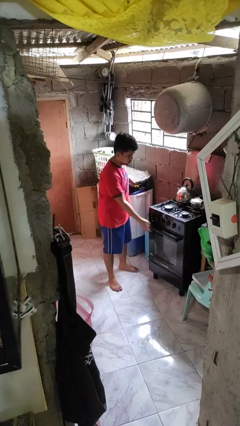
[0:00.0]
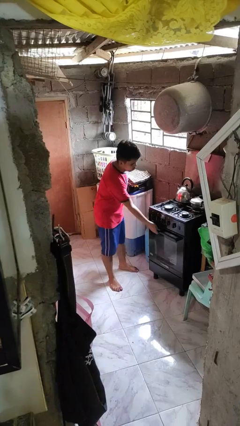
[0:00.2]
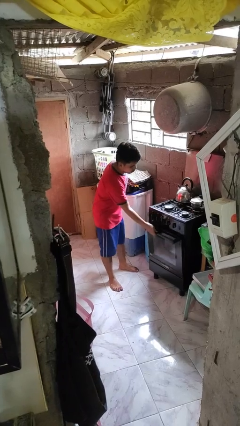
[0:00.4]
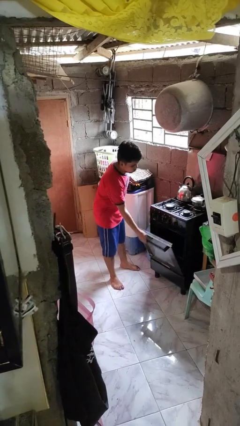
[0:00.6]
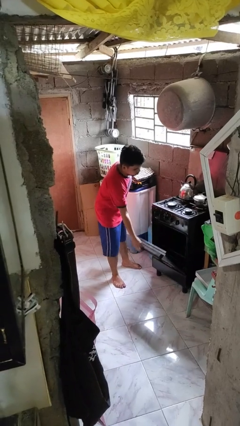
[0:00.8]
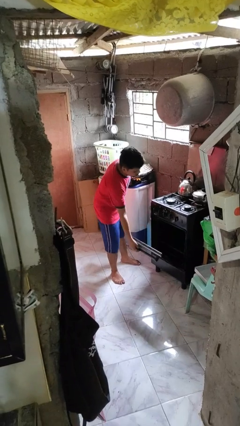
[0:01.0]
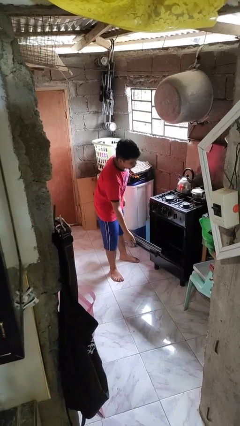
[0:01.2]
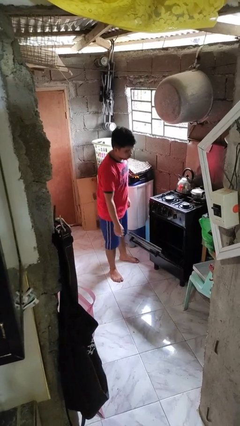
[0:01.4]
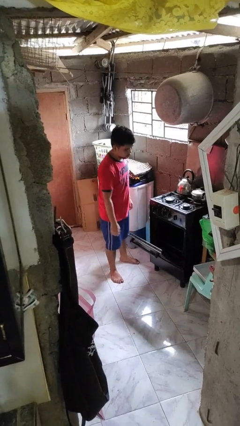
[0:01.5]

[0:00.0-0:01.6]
person opens oven door

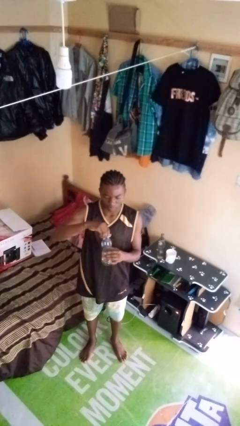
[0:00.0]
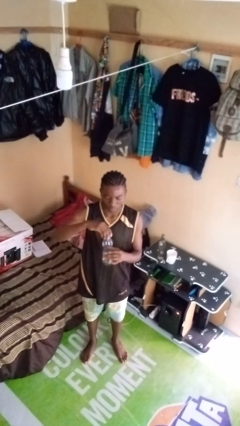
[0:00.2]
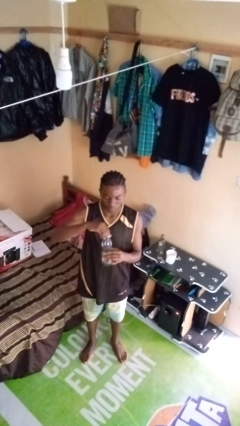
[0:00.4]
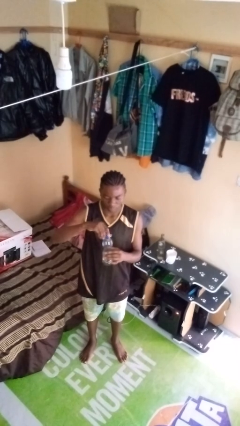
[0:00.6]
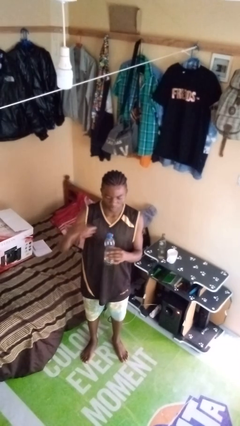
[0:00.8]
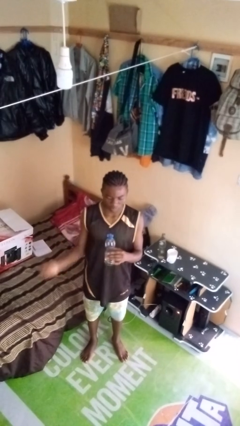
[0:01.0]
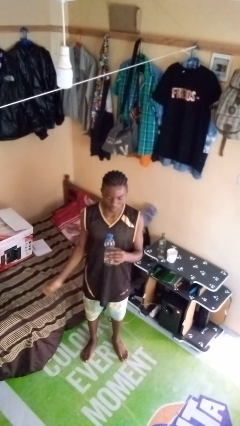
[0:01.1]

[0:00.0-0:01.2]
person screws lid to bottle

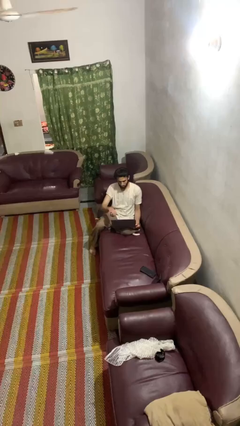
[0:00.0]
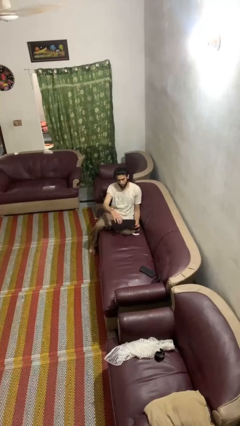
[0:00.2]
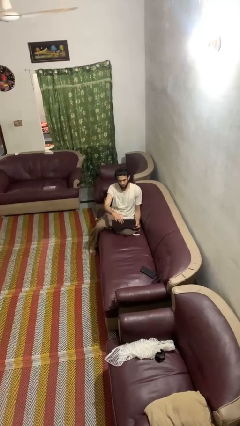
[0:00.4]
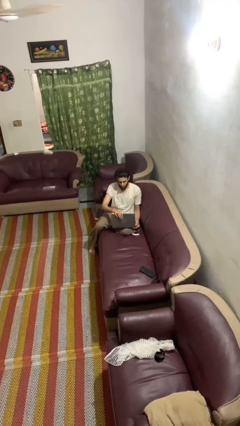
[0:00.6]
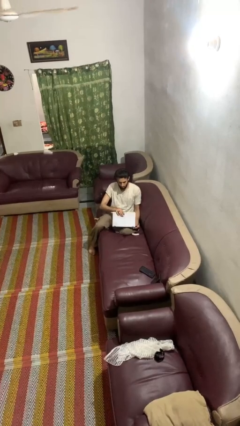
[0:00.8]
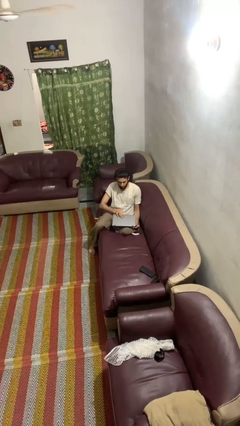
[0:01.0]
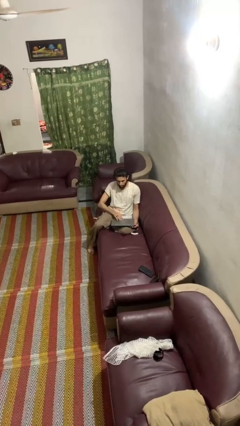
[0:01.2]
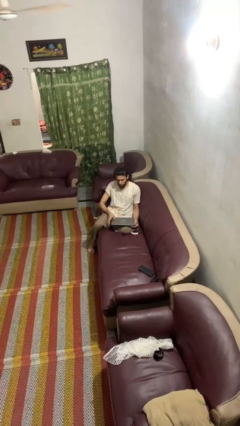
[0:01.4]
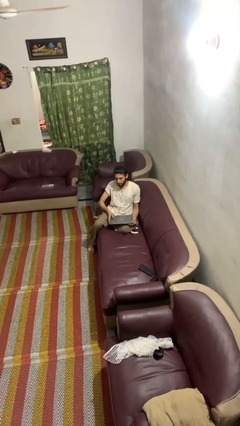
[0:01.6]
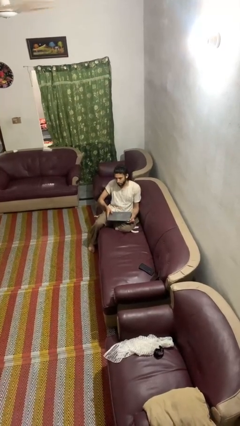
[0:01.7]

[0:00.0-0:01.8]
person closes laptop

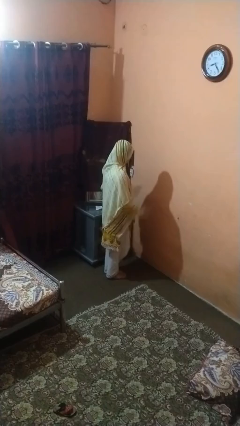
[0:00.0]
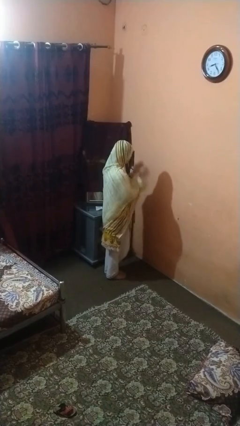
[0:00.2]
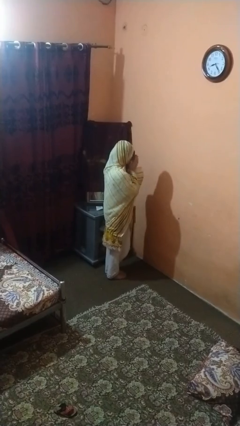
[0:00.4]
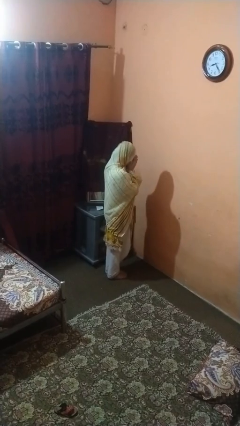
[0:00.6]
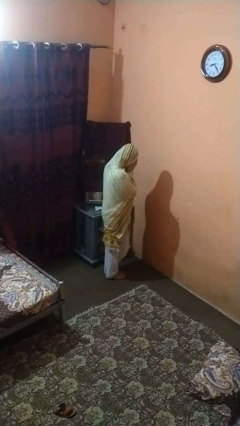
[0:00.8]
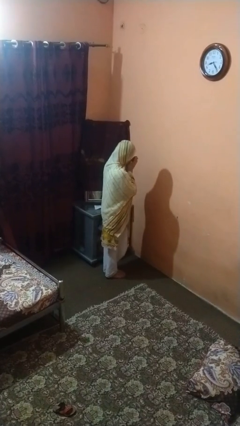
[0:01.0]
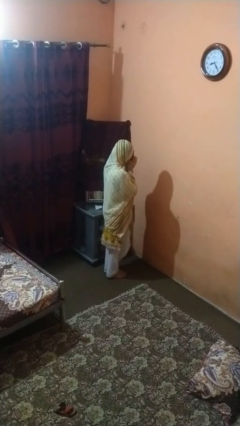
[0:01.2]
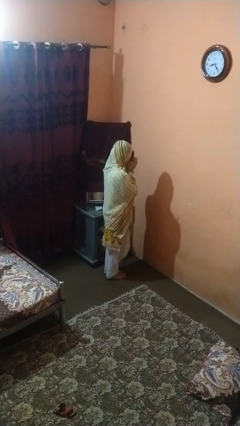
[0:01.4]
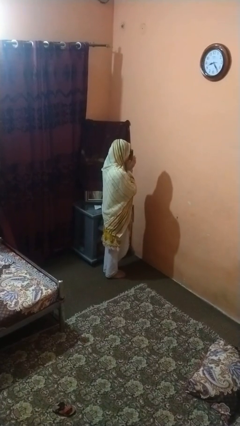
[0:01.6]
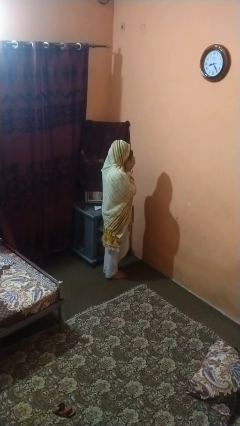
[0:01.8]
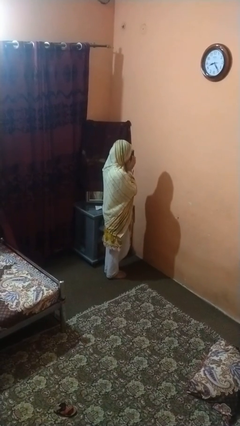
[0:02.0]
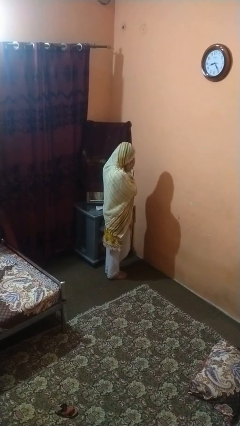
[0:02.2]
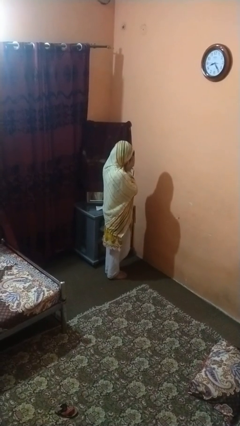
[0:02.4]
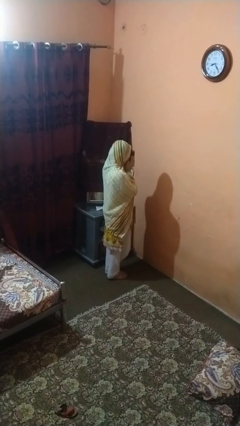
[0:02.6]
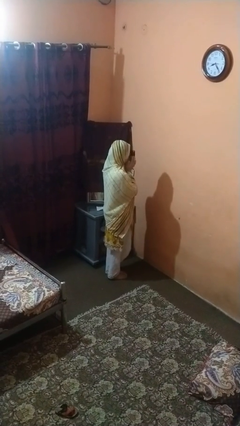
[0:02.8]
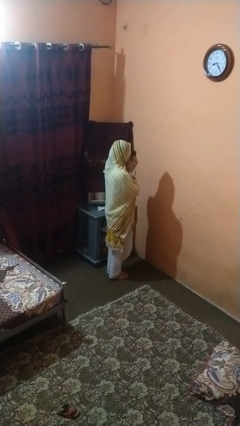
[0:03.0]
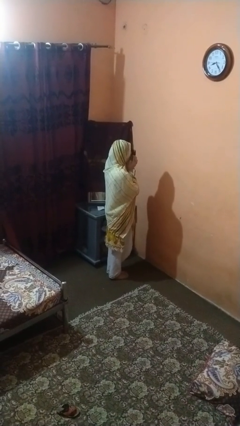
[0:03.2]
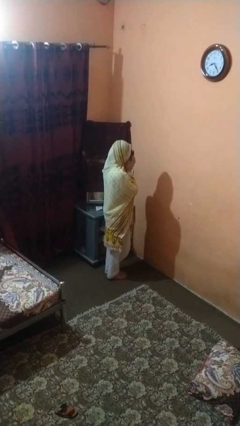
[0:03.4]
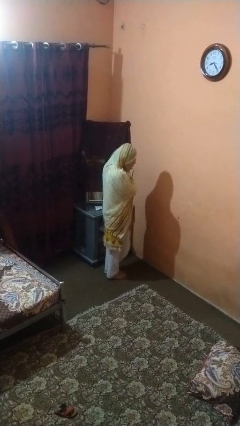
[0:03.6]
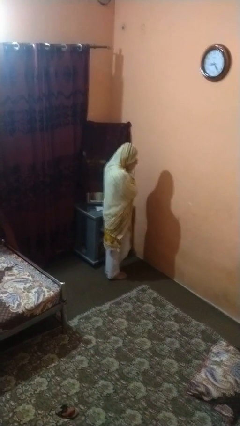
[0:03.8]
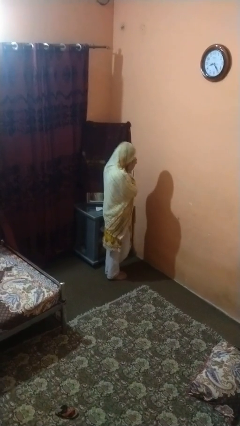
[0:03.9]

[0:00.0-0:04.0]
person sneezes into hand

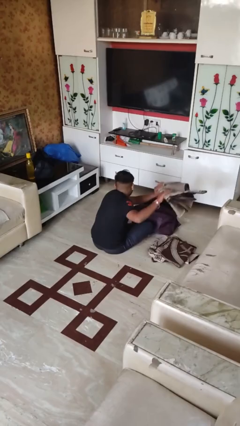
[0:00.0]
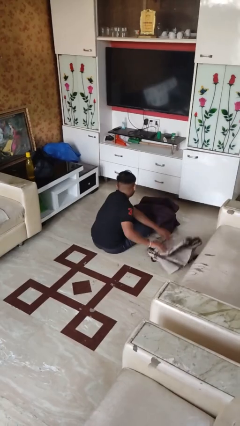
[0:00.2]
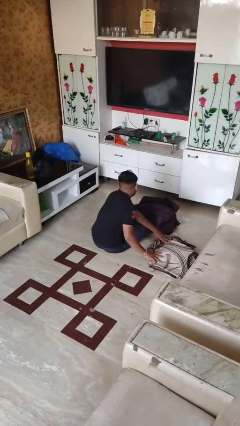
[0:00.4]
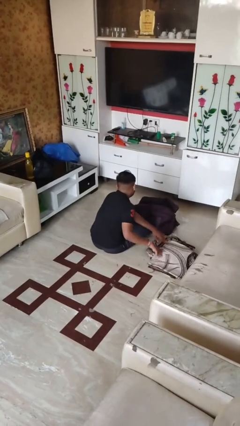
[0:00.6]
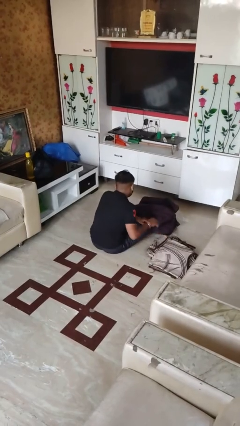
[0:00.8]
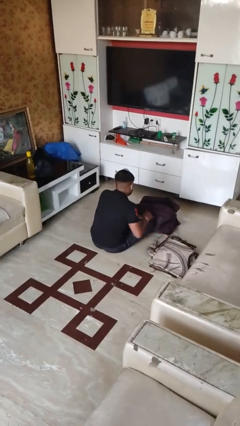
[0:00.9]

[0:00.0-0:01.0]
person unloads clothes from suitcase

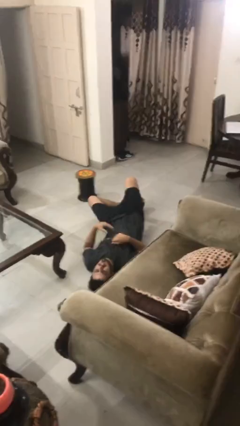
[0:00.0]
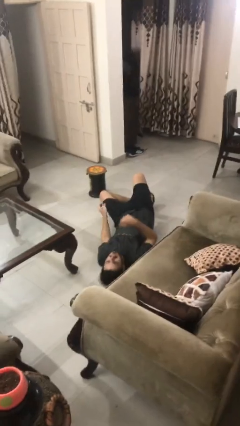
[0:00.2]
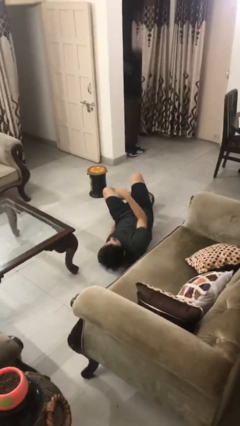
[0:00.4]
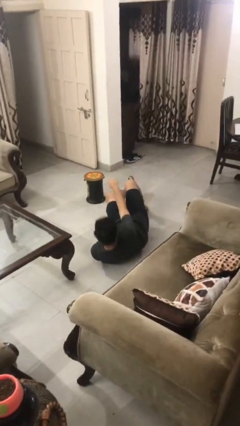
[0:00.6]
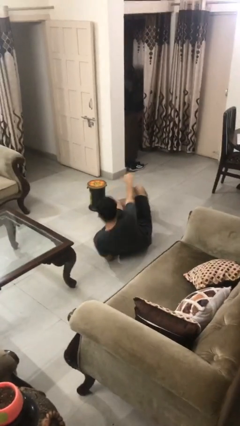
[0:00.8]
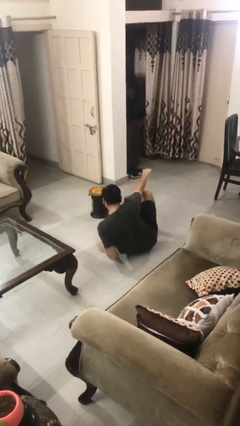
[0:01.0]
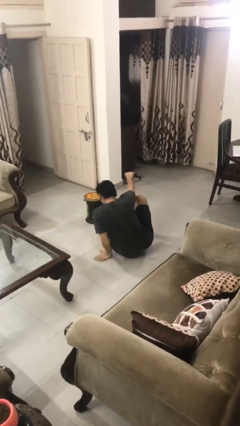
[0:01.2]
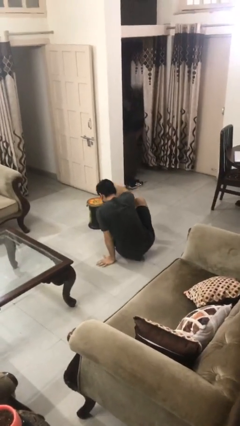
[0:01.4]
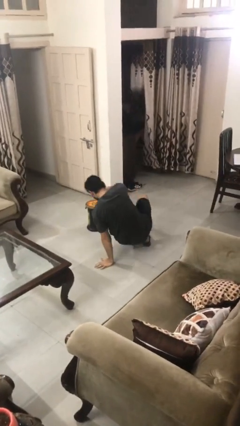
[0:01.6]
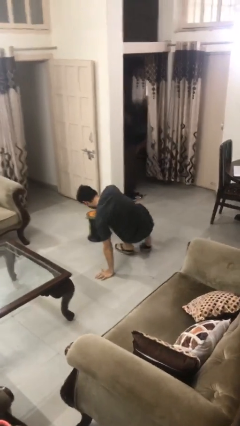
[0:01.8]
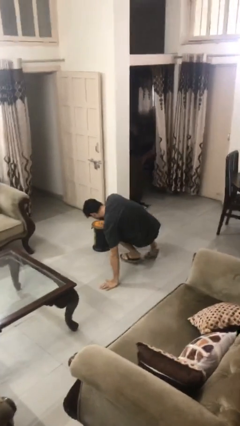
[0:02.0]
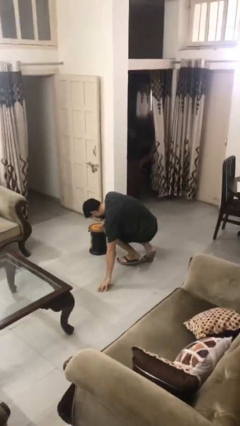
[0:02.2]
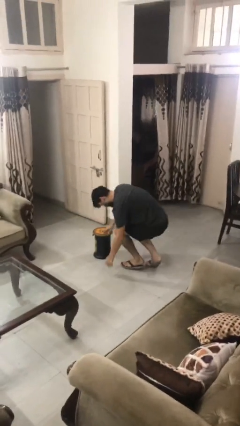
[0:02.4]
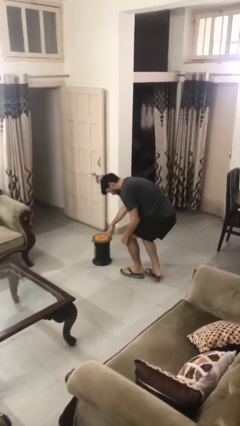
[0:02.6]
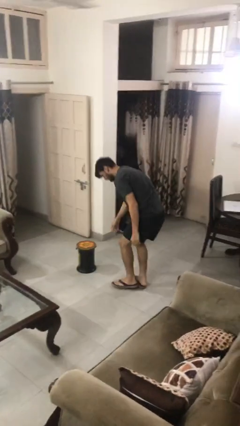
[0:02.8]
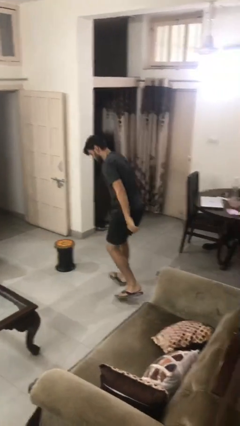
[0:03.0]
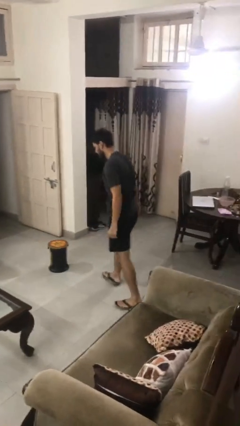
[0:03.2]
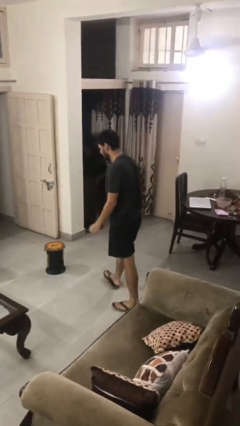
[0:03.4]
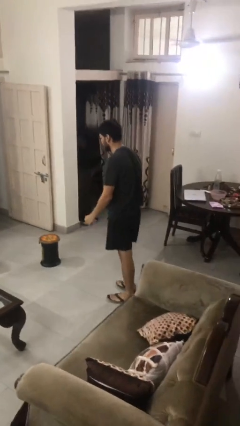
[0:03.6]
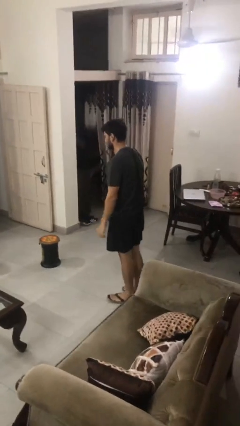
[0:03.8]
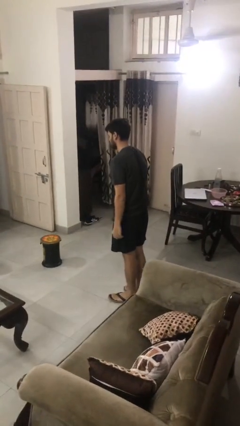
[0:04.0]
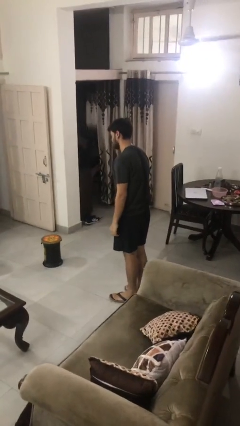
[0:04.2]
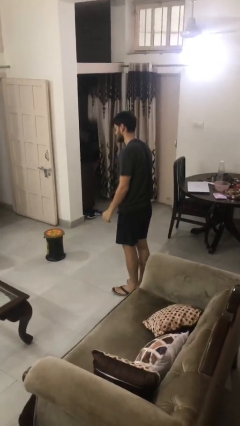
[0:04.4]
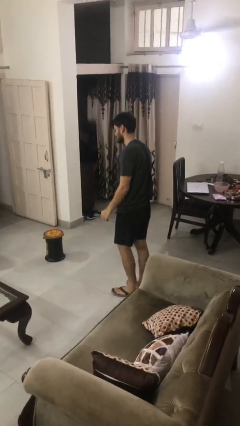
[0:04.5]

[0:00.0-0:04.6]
person stands up from floor

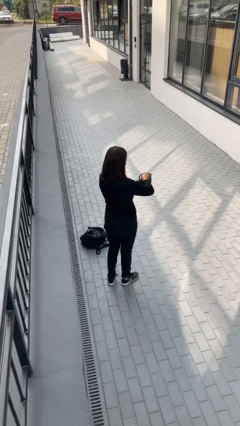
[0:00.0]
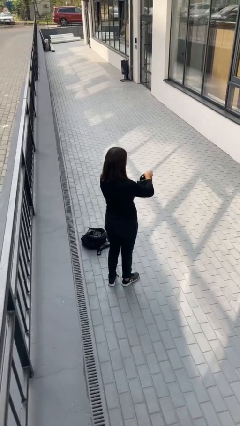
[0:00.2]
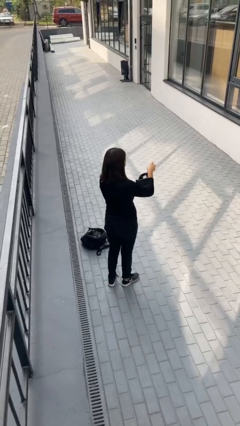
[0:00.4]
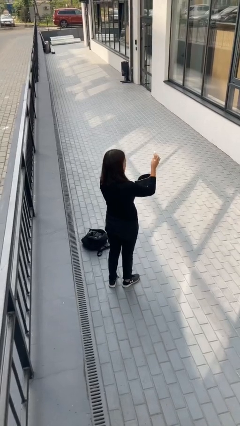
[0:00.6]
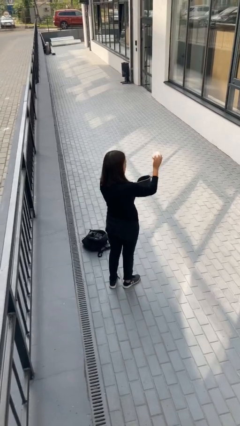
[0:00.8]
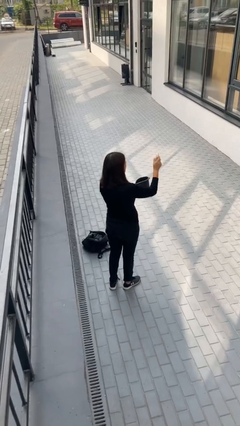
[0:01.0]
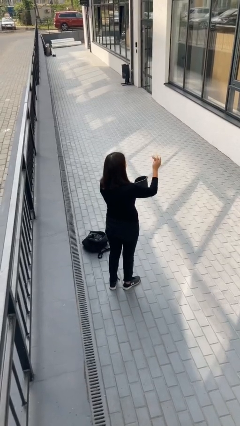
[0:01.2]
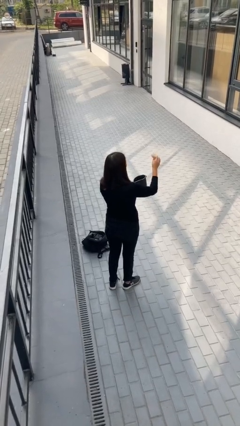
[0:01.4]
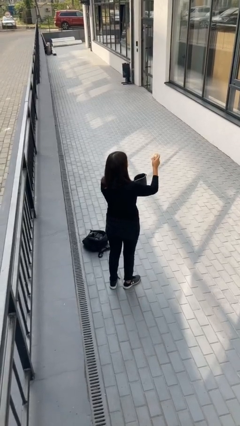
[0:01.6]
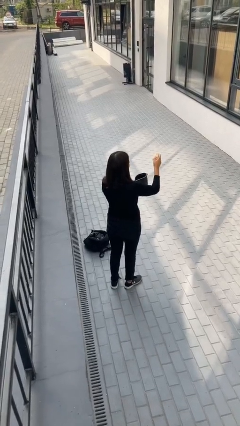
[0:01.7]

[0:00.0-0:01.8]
person takes object from purse

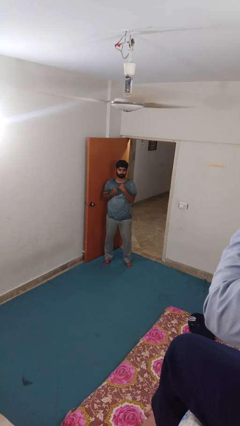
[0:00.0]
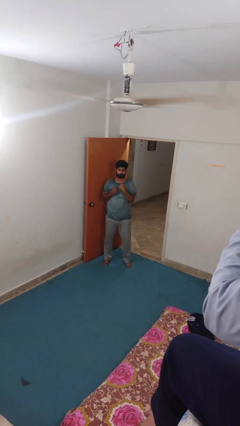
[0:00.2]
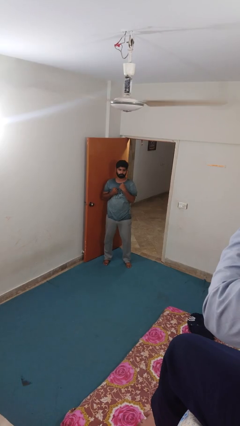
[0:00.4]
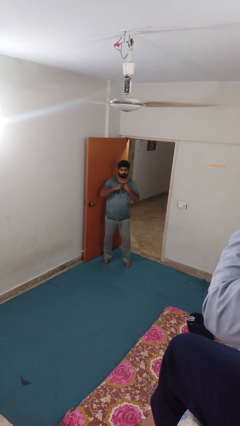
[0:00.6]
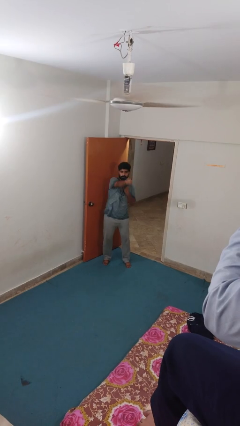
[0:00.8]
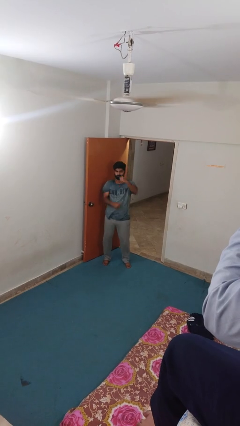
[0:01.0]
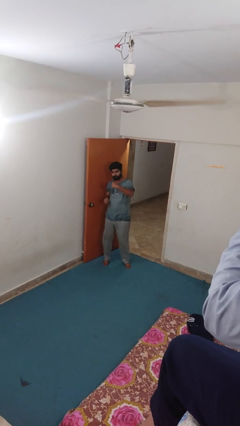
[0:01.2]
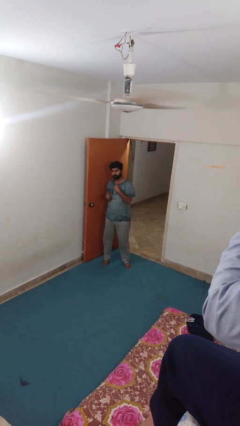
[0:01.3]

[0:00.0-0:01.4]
person punches
